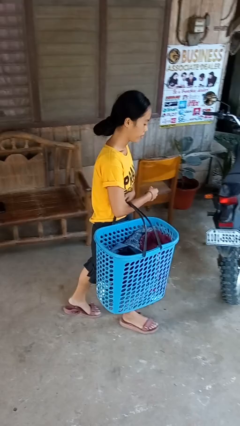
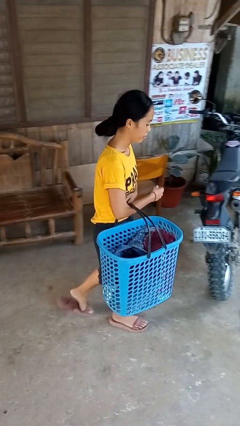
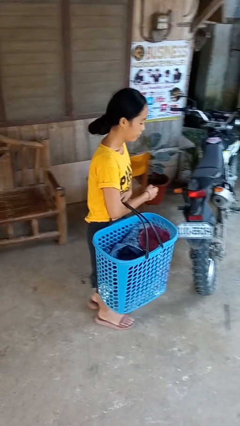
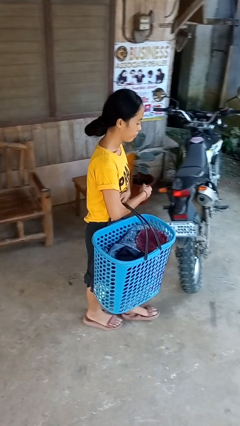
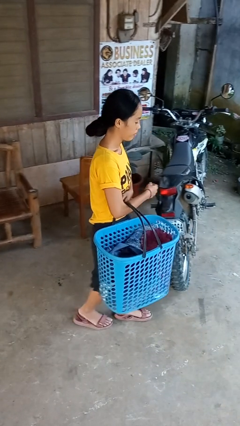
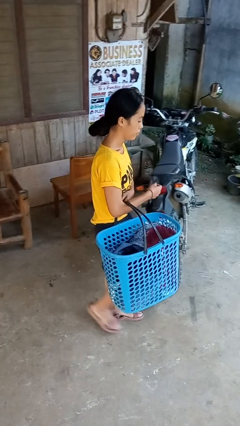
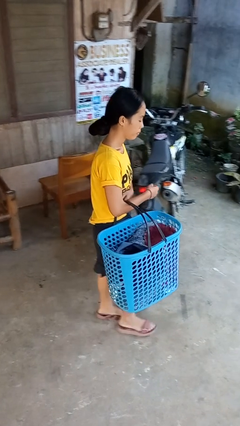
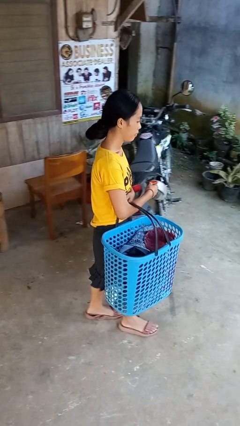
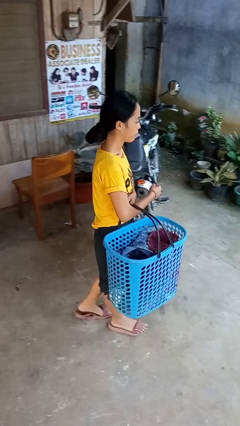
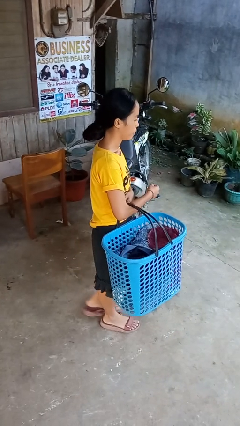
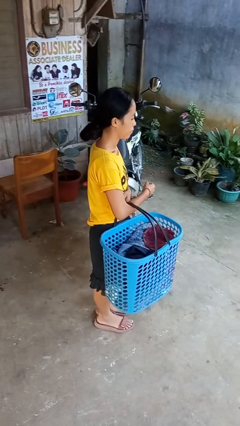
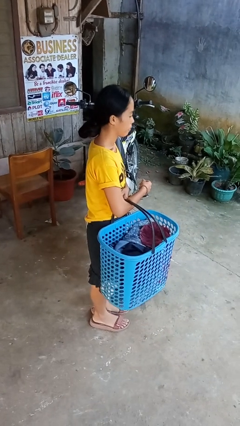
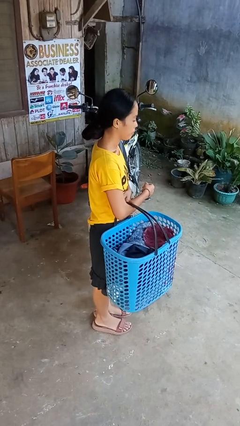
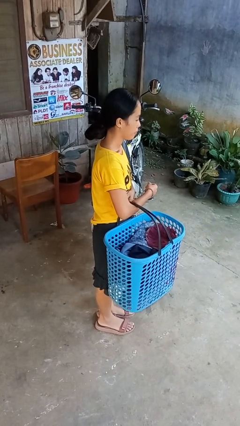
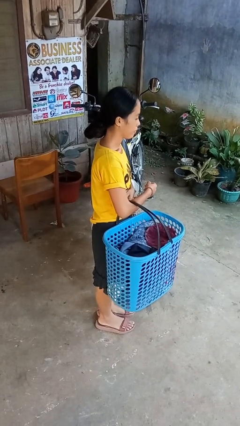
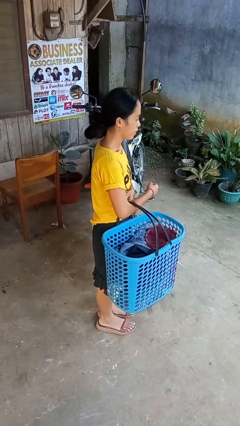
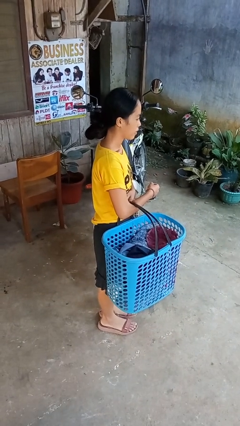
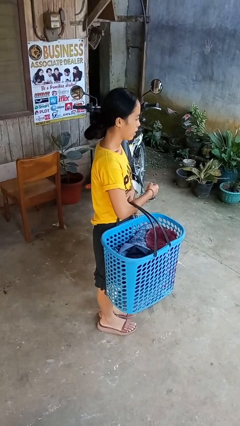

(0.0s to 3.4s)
person carries laundry basket

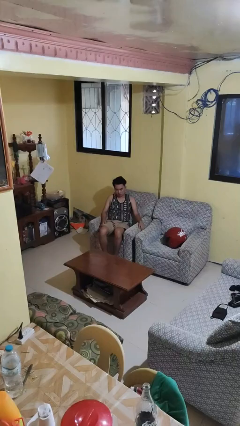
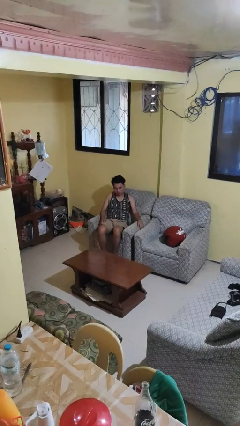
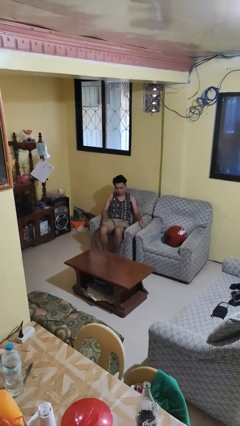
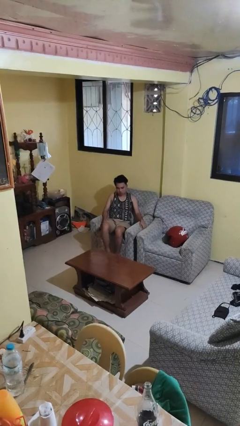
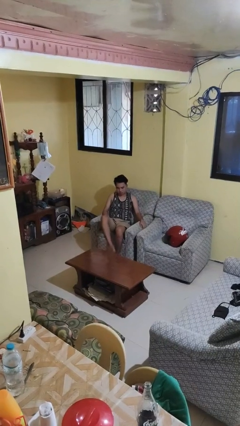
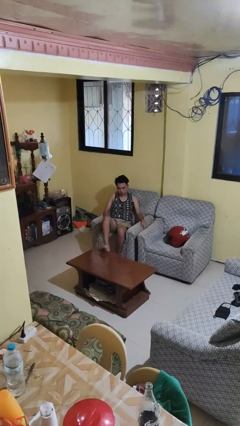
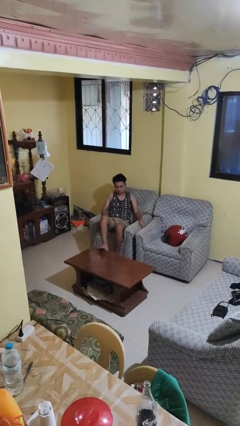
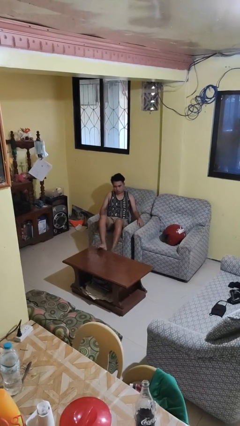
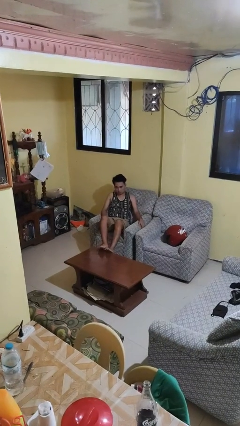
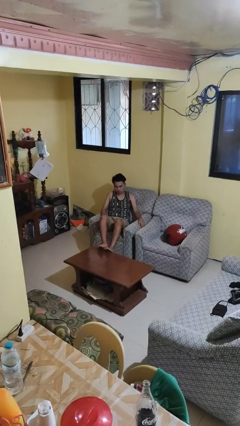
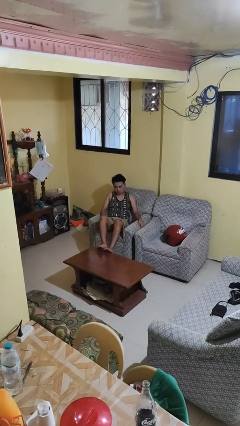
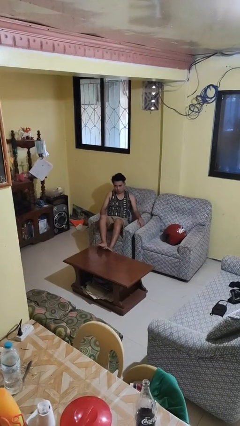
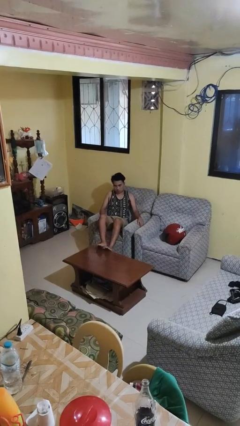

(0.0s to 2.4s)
person puts feet up

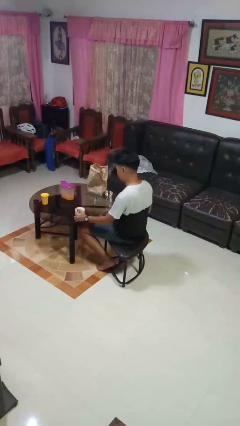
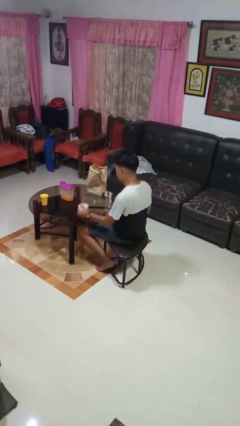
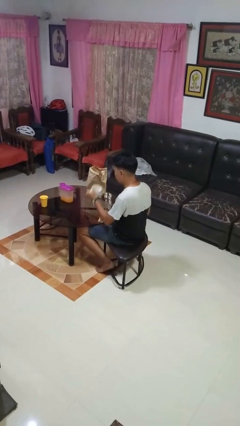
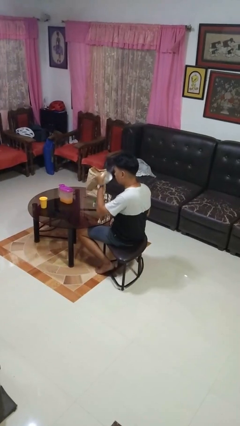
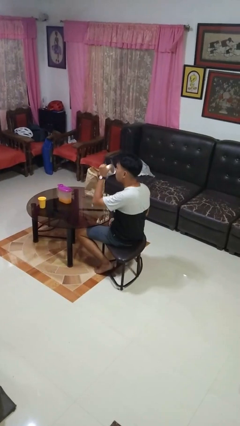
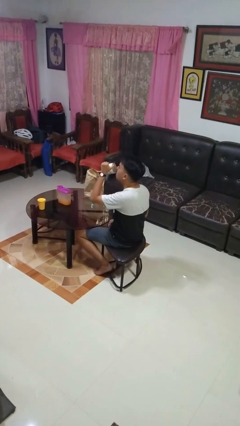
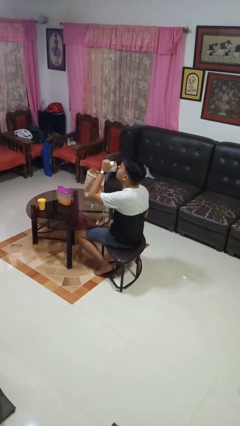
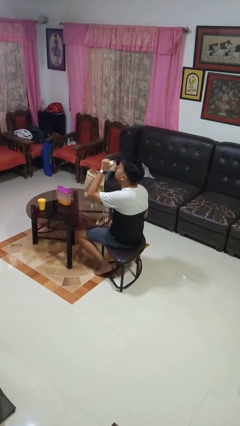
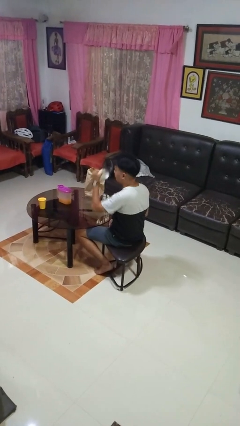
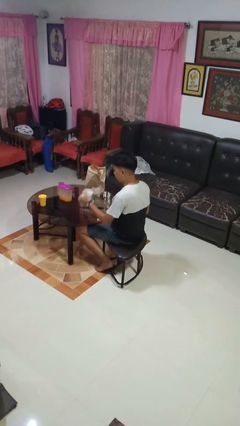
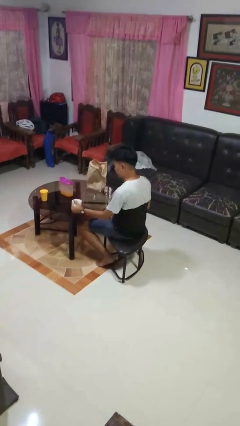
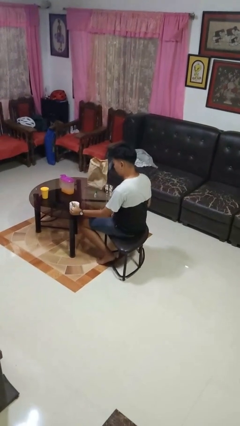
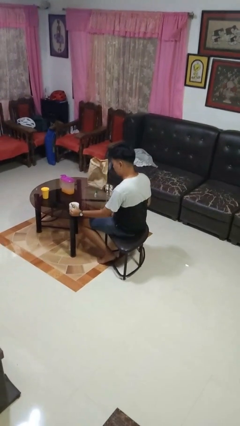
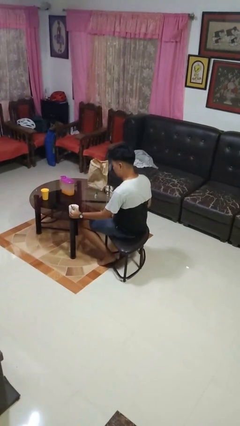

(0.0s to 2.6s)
person drinks from mug

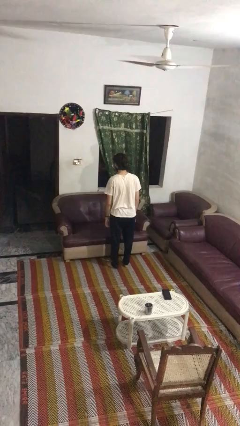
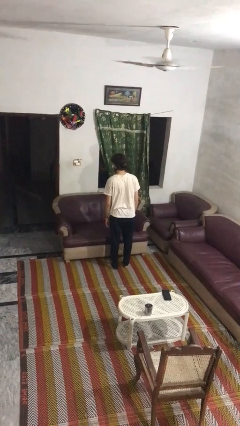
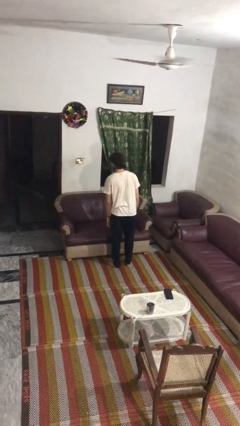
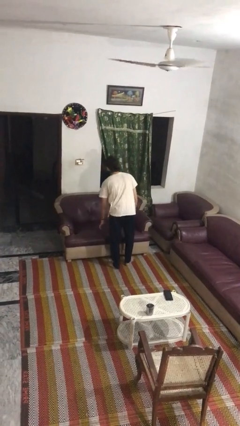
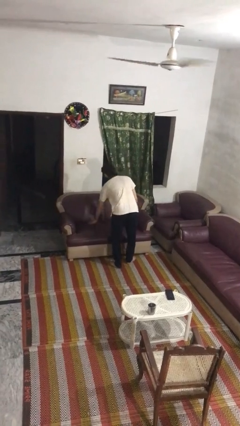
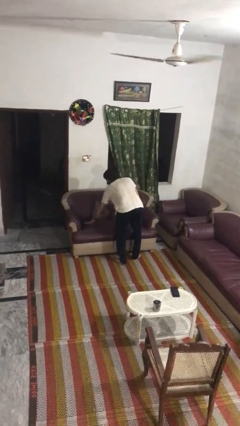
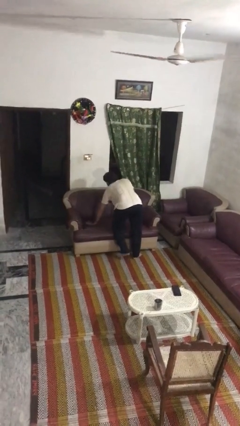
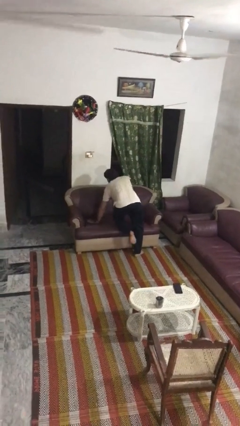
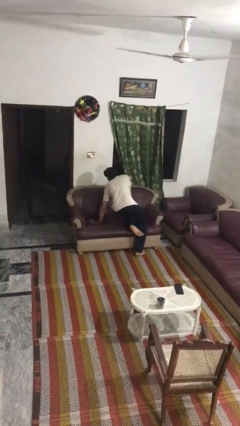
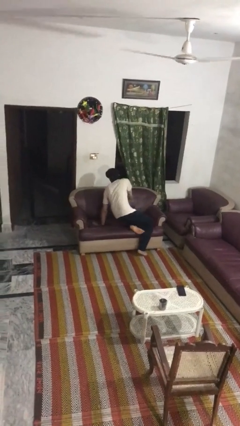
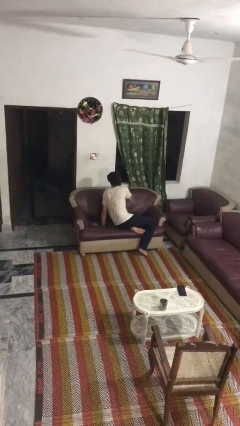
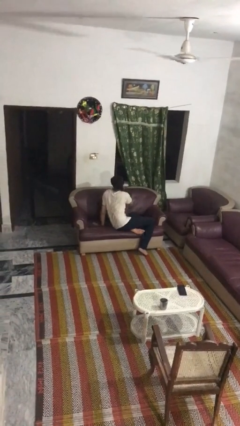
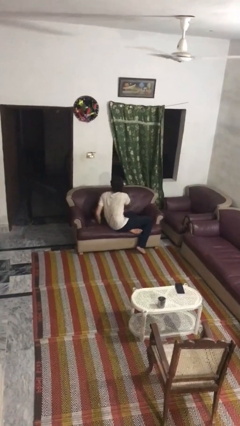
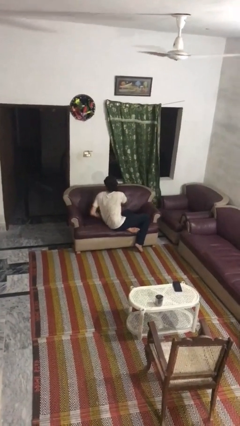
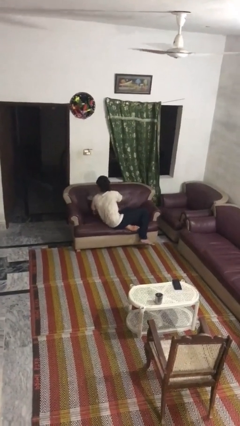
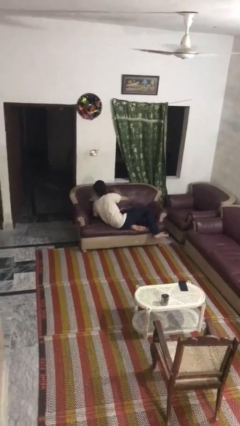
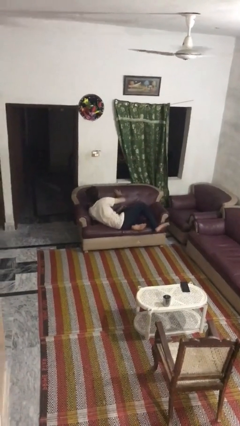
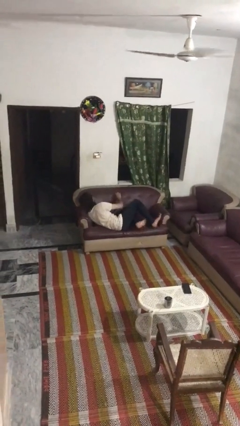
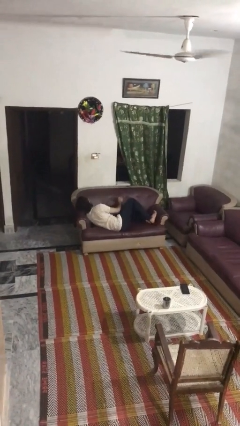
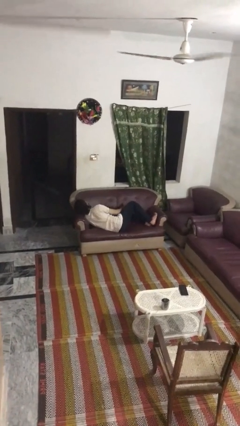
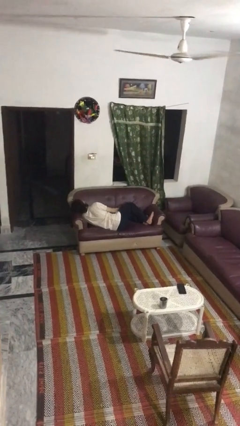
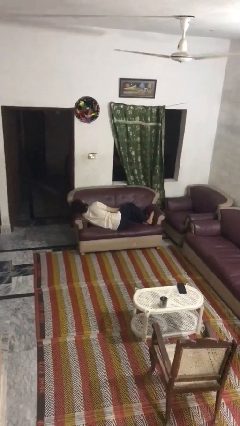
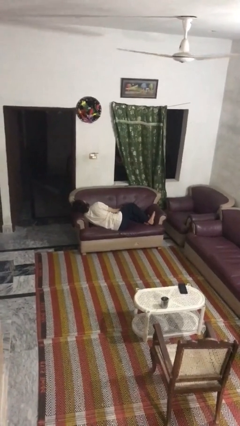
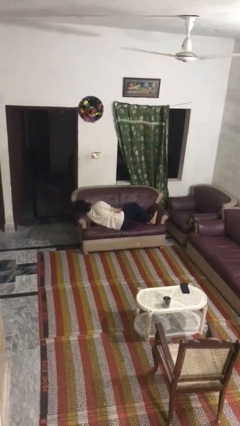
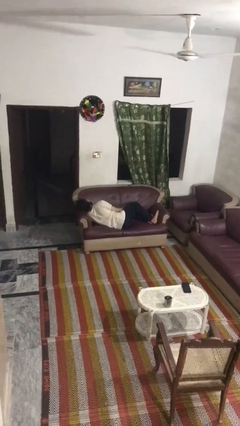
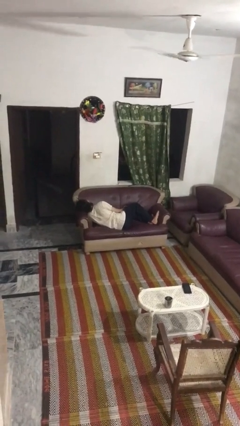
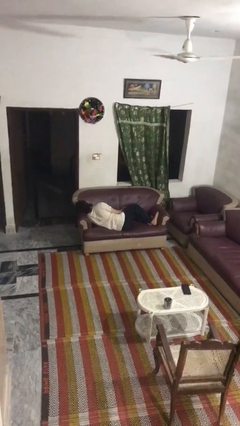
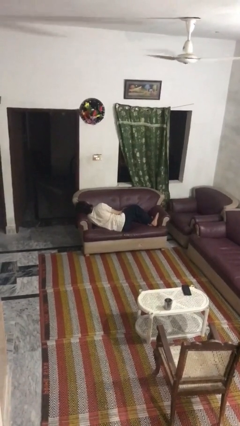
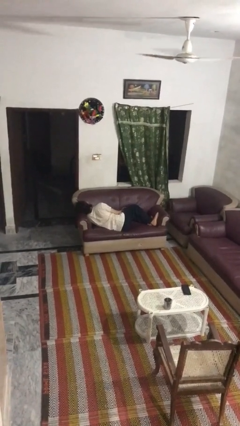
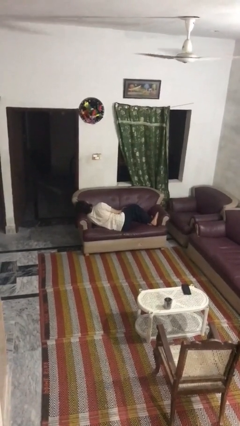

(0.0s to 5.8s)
person lies down on couch

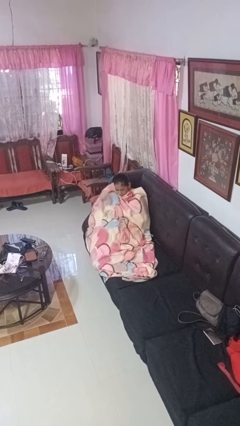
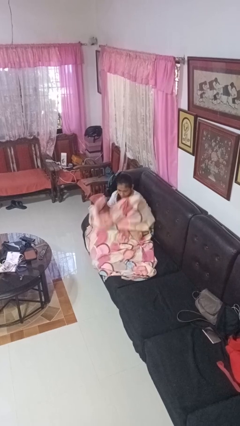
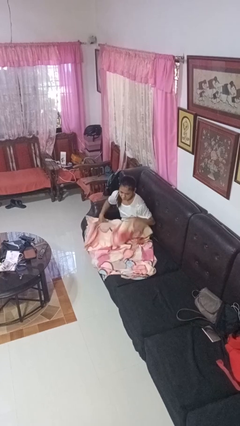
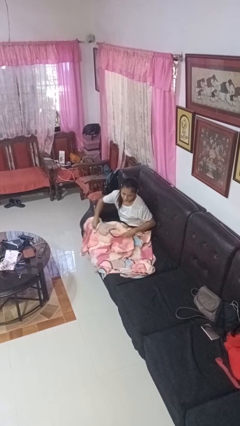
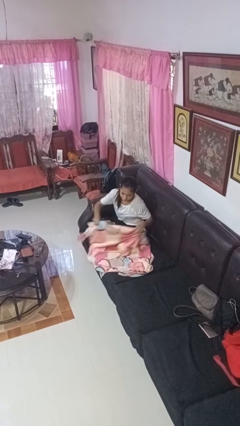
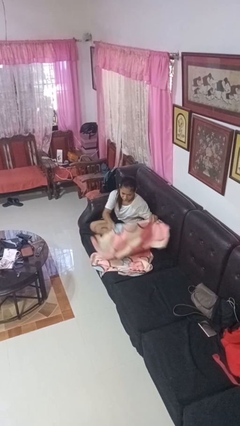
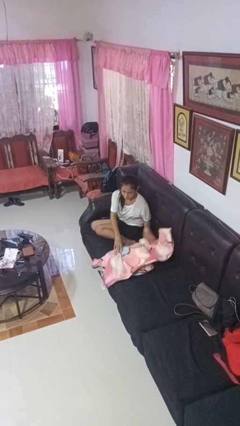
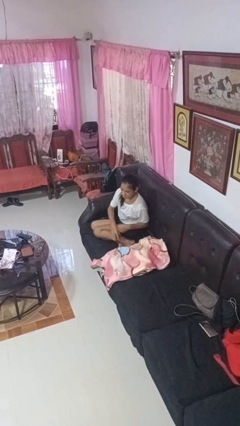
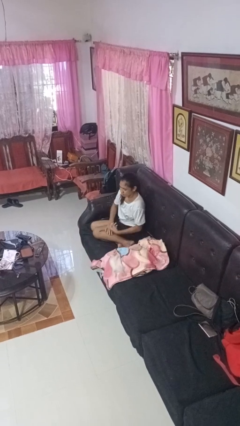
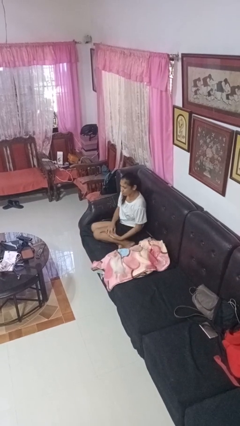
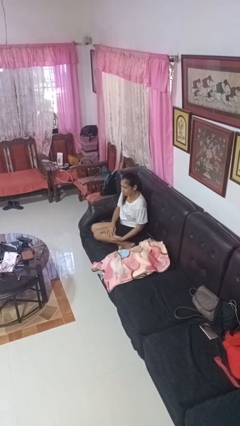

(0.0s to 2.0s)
person uncovers with blanket

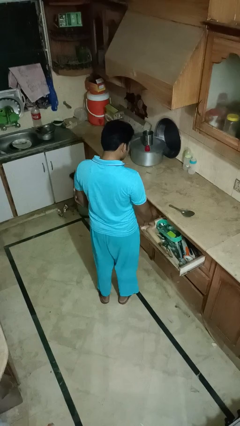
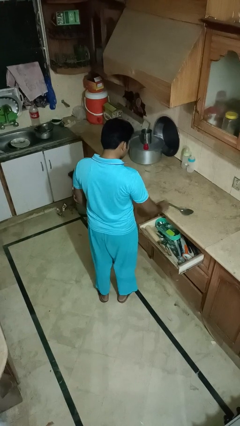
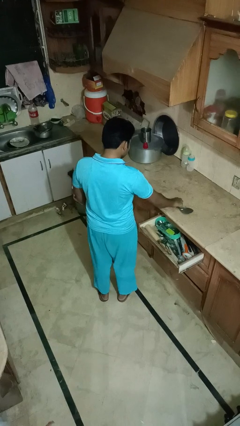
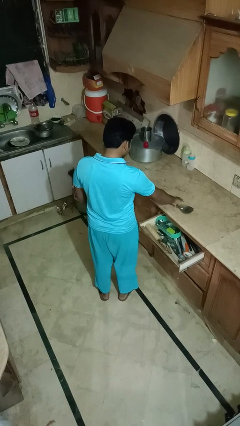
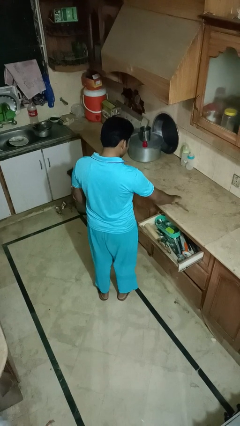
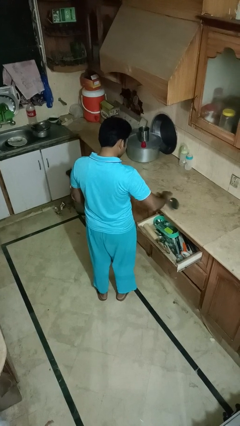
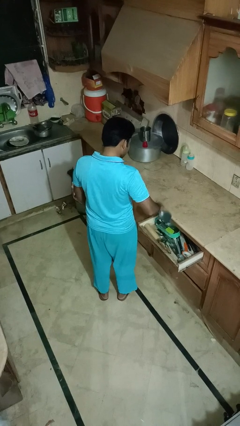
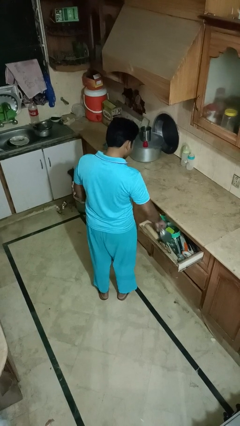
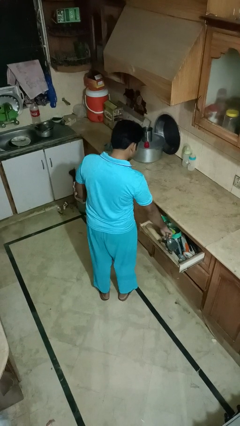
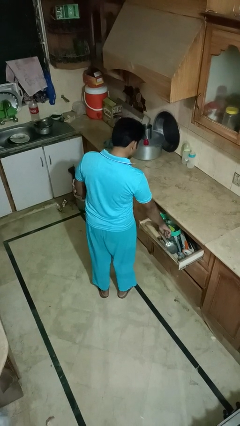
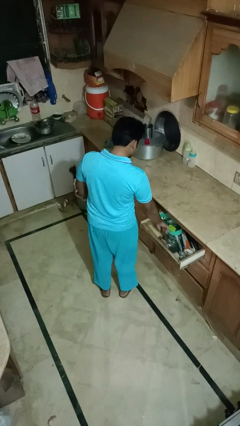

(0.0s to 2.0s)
person puts object into kitchen drawer
